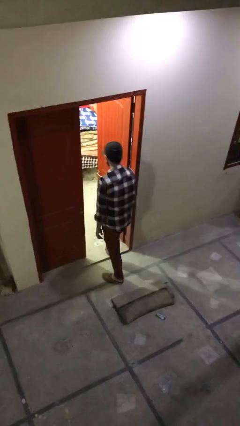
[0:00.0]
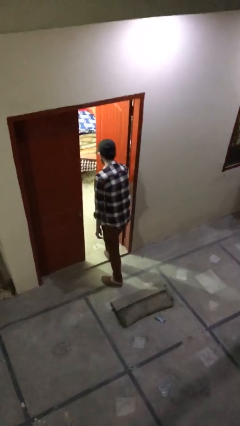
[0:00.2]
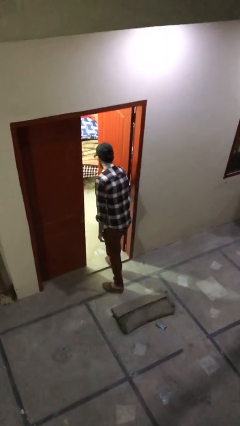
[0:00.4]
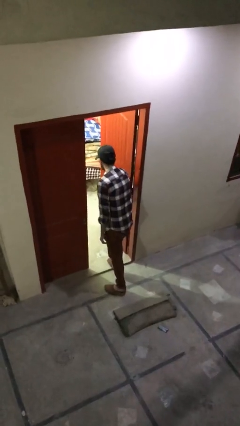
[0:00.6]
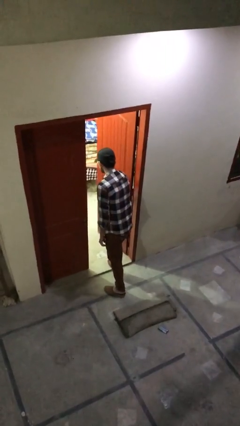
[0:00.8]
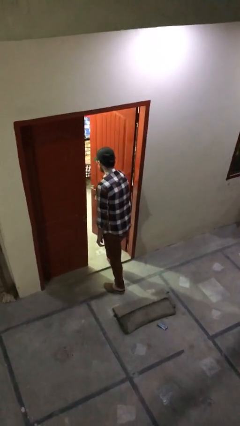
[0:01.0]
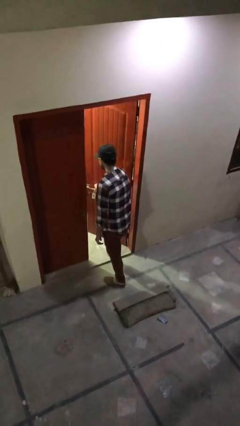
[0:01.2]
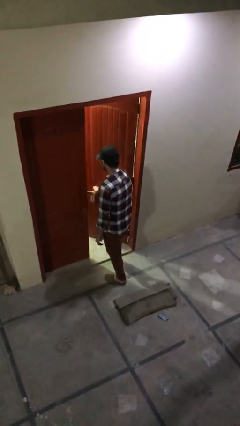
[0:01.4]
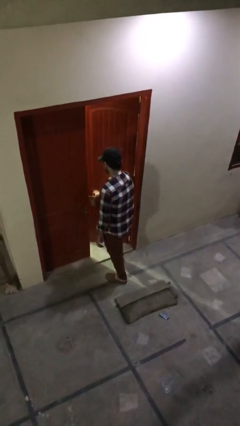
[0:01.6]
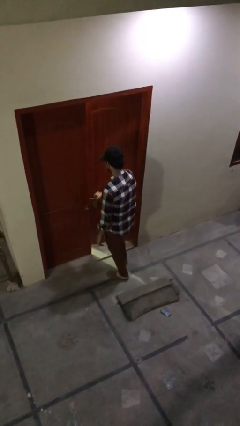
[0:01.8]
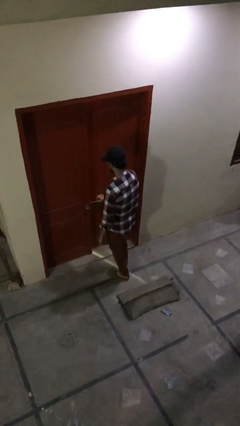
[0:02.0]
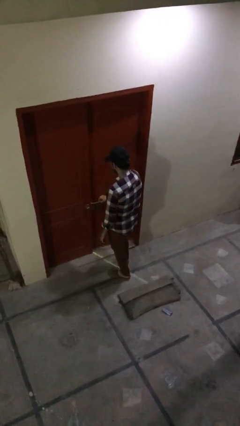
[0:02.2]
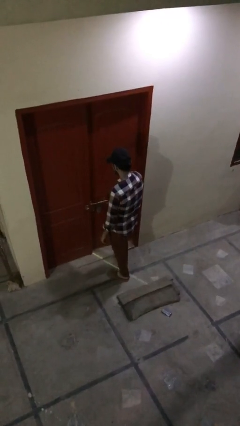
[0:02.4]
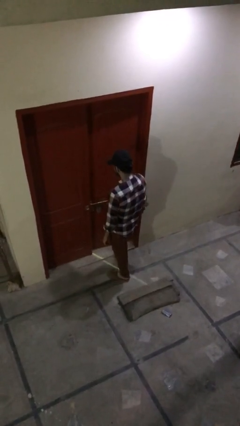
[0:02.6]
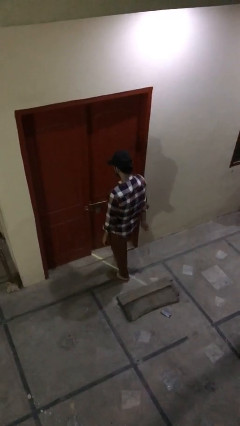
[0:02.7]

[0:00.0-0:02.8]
person closes facility door

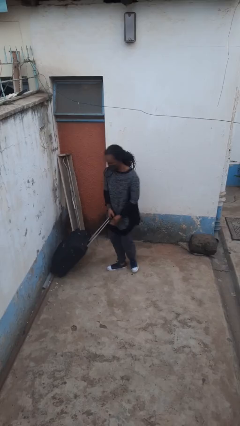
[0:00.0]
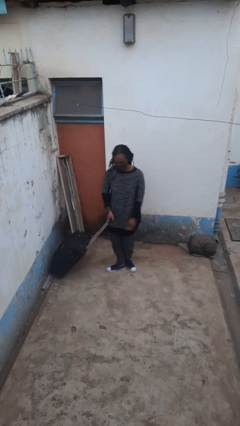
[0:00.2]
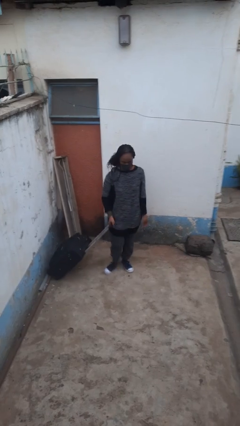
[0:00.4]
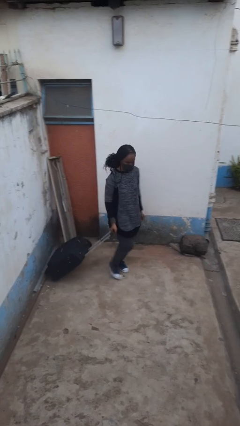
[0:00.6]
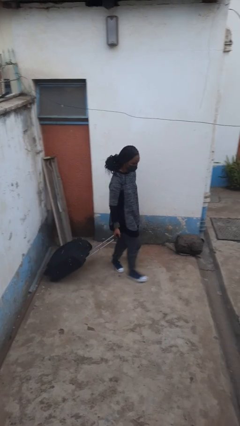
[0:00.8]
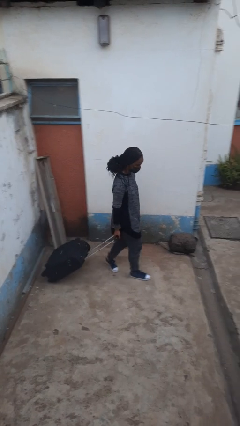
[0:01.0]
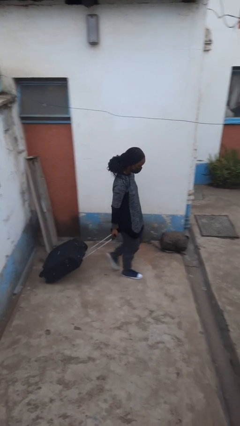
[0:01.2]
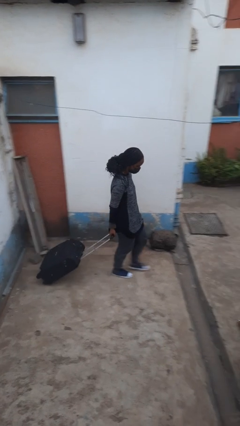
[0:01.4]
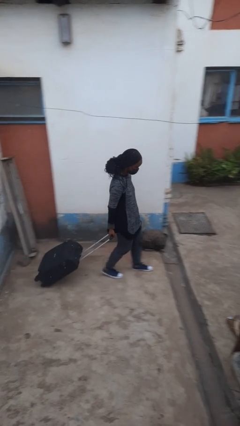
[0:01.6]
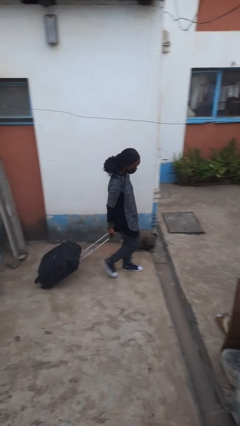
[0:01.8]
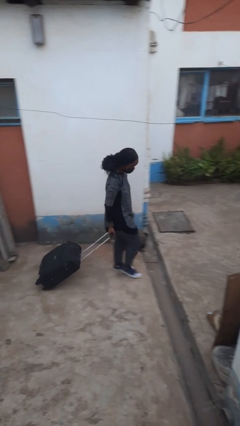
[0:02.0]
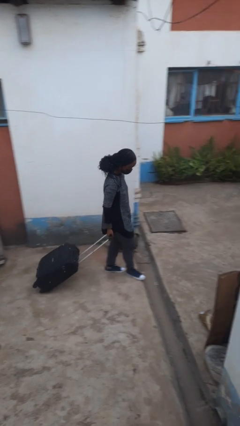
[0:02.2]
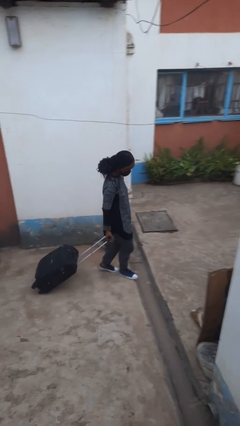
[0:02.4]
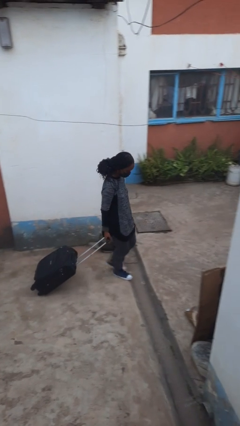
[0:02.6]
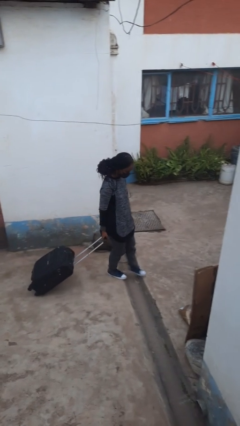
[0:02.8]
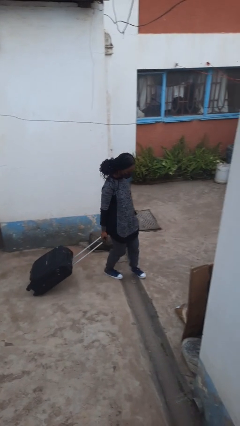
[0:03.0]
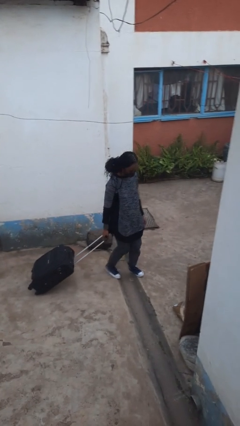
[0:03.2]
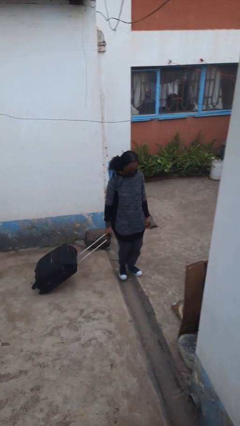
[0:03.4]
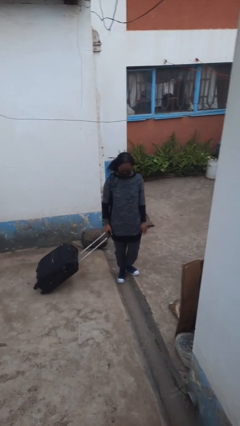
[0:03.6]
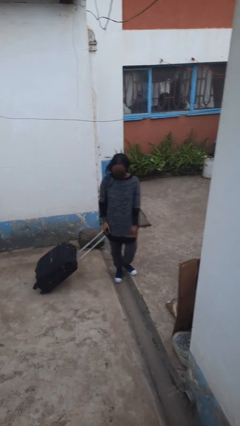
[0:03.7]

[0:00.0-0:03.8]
person pulls wheeled cart

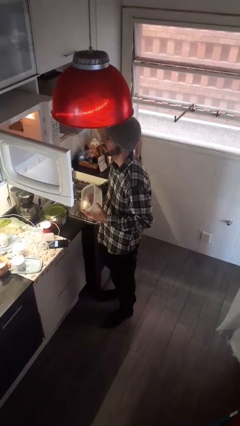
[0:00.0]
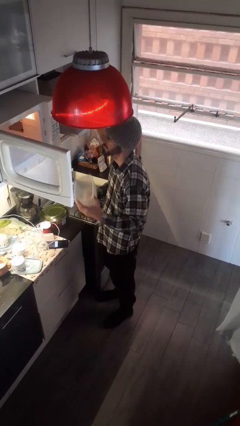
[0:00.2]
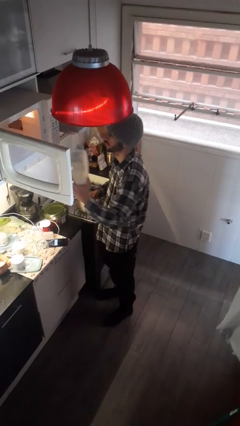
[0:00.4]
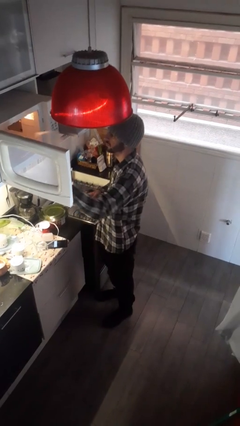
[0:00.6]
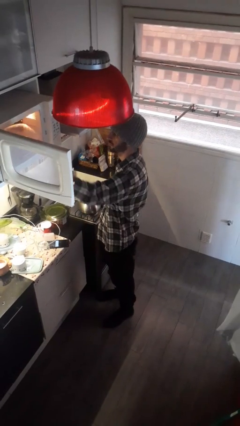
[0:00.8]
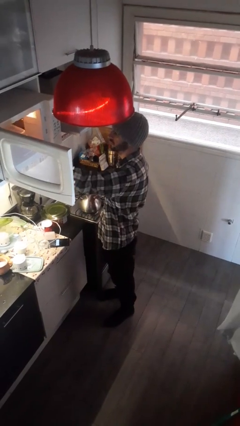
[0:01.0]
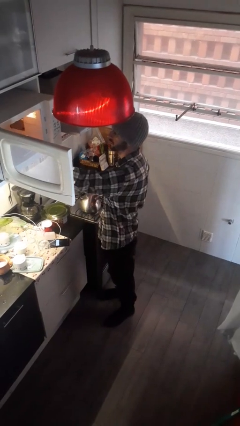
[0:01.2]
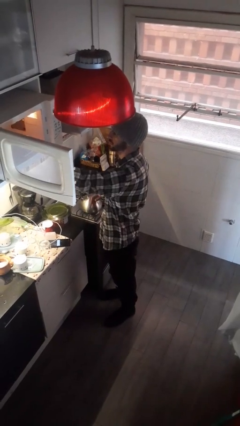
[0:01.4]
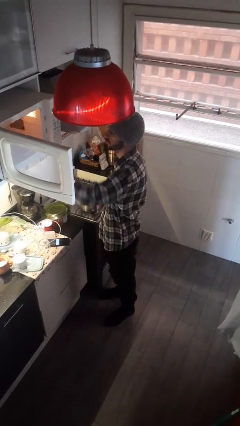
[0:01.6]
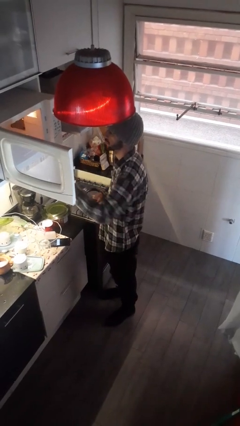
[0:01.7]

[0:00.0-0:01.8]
person puts object into microwave

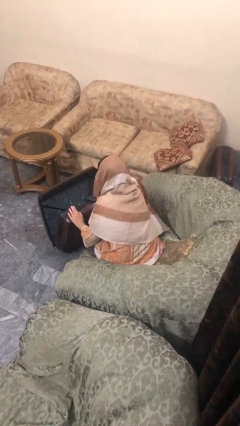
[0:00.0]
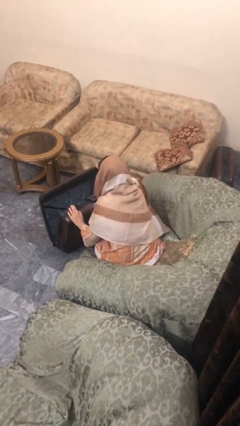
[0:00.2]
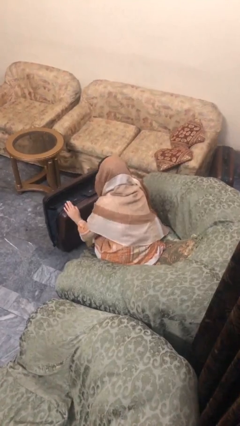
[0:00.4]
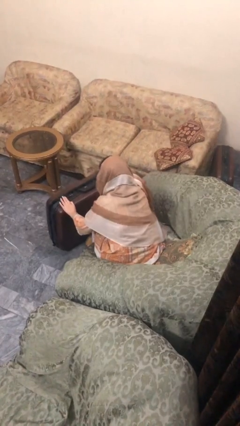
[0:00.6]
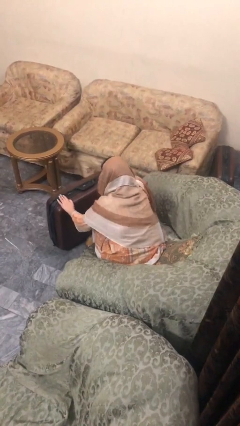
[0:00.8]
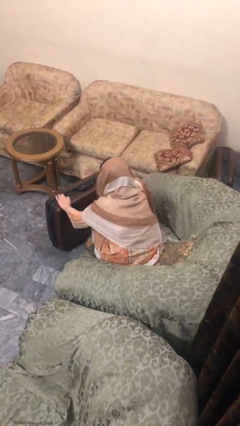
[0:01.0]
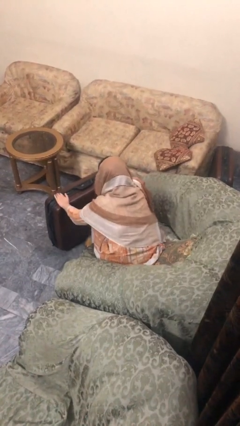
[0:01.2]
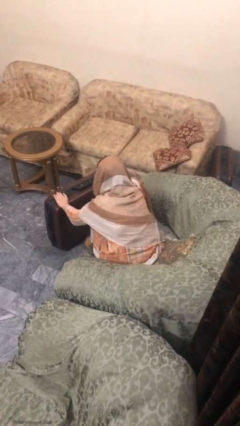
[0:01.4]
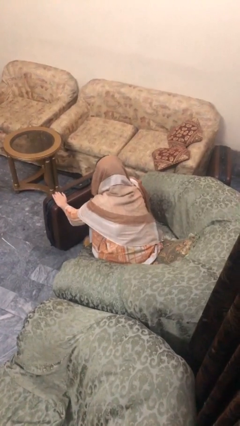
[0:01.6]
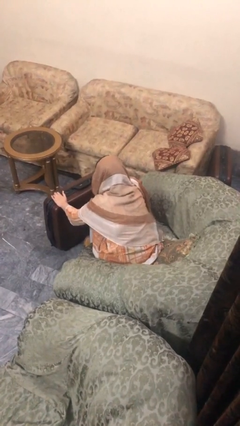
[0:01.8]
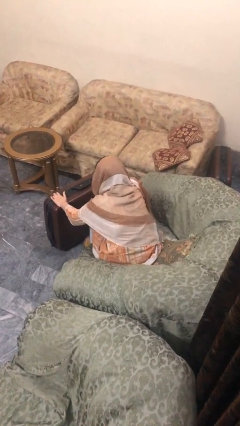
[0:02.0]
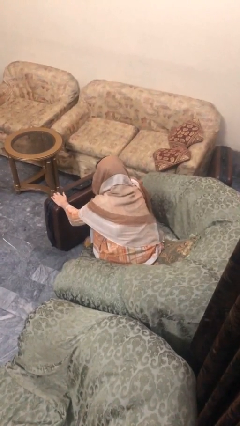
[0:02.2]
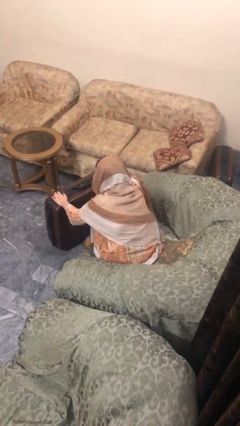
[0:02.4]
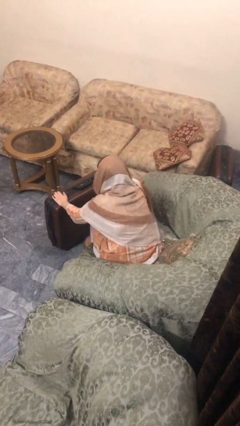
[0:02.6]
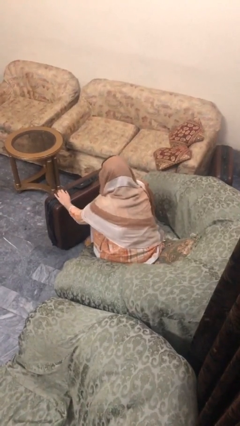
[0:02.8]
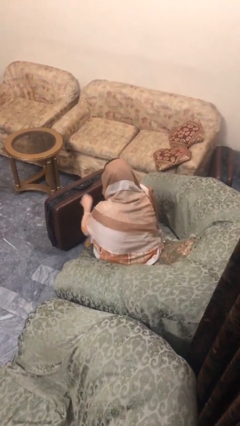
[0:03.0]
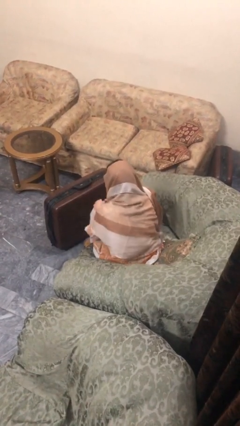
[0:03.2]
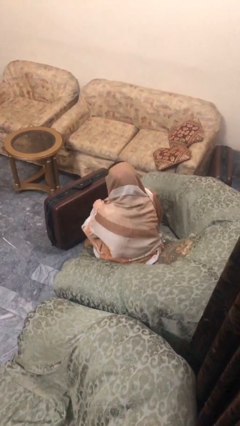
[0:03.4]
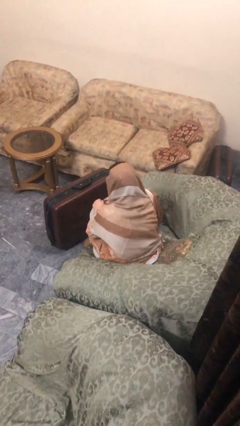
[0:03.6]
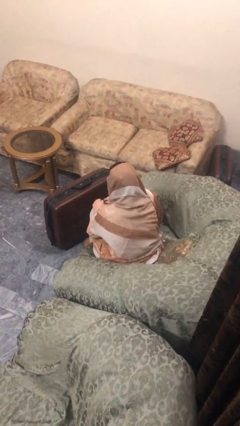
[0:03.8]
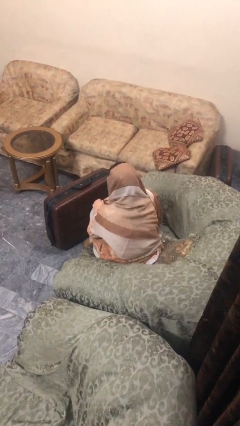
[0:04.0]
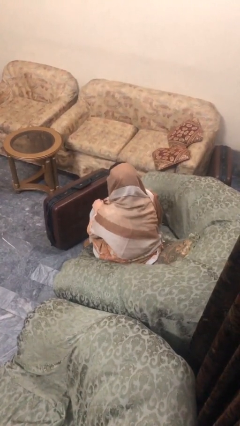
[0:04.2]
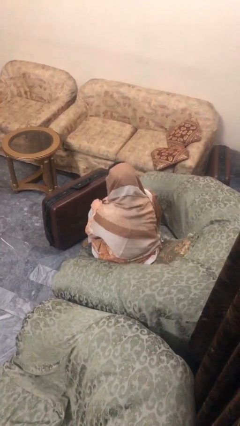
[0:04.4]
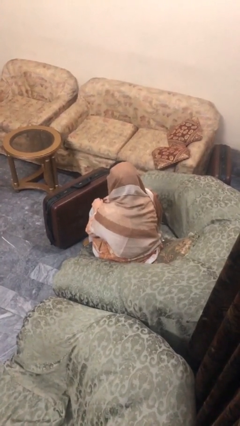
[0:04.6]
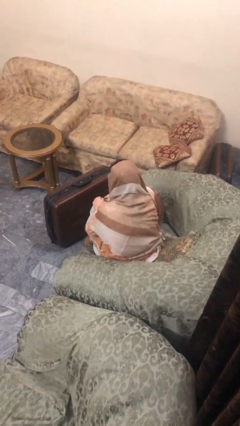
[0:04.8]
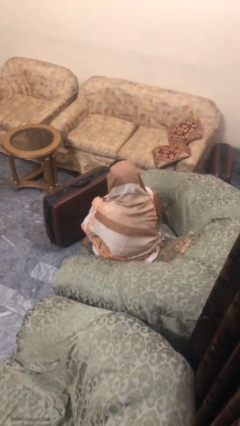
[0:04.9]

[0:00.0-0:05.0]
person closes suitcase

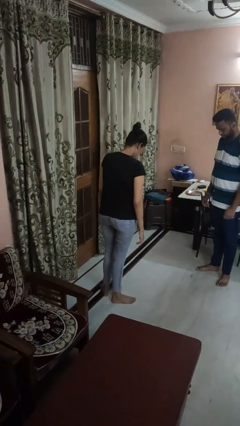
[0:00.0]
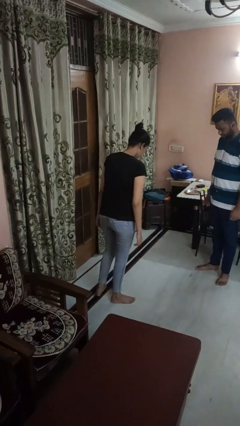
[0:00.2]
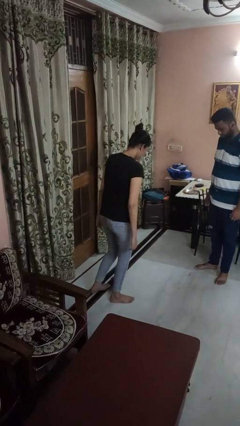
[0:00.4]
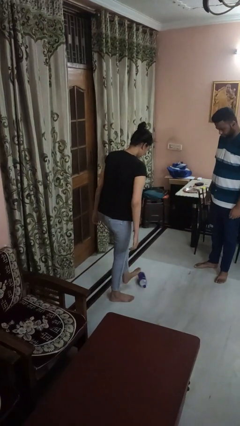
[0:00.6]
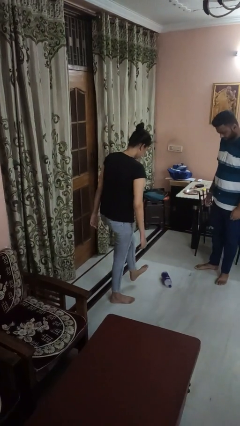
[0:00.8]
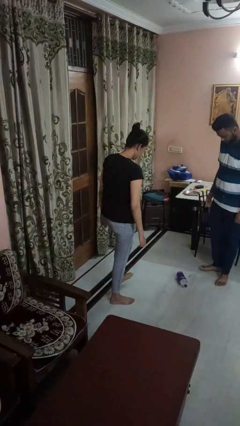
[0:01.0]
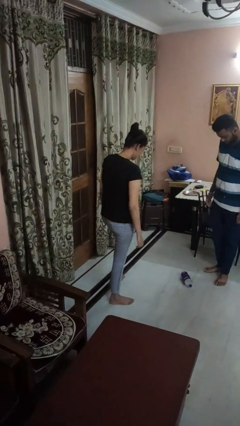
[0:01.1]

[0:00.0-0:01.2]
person kicks object to person

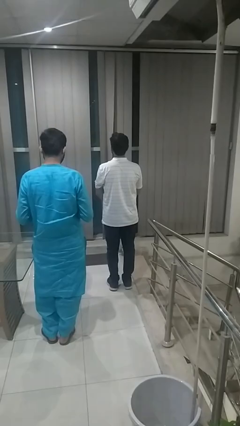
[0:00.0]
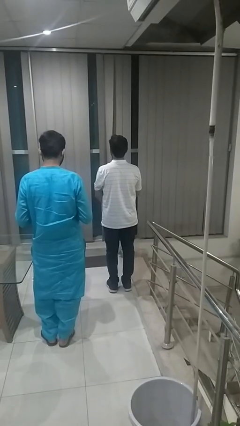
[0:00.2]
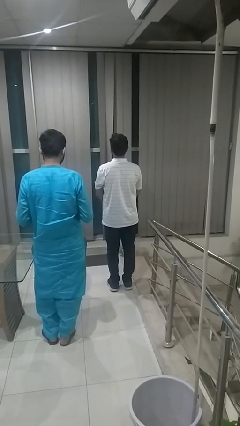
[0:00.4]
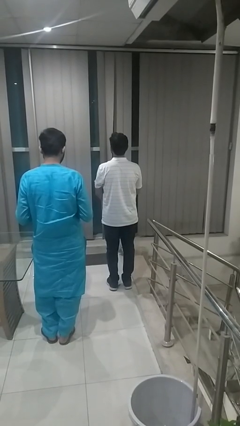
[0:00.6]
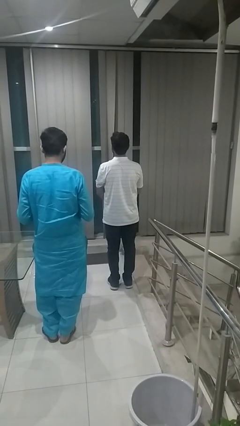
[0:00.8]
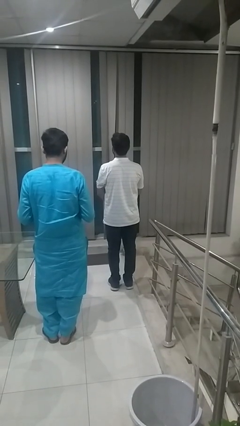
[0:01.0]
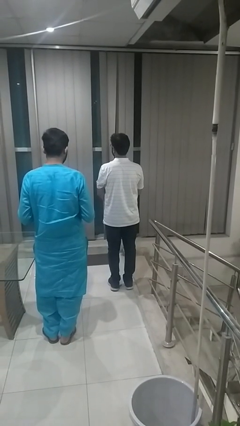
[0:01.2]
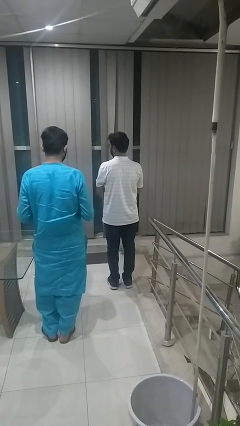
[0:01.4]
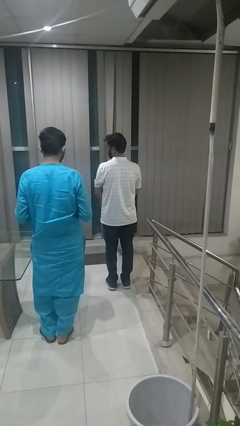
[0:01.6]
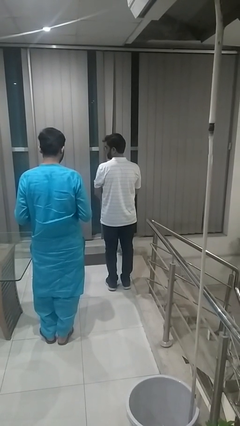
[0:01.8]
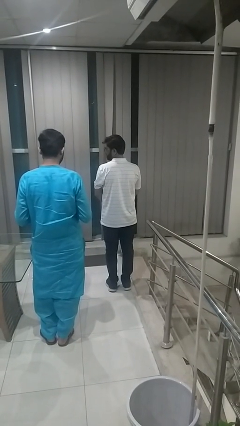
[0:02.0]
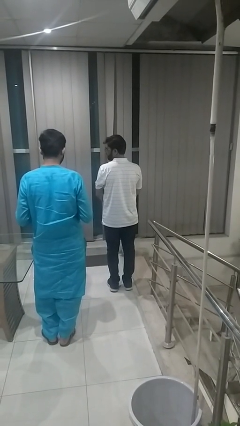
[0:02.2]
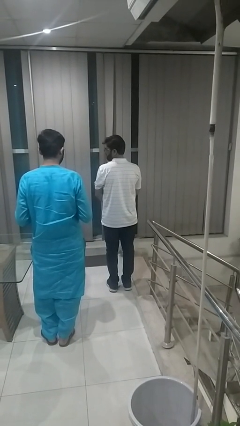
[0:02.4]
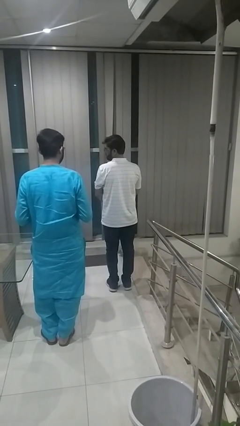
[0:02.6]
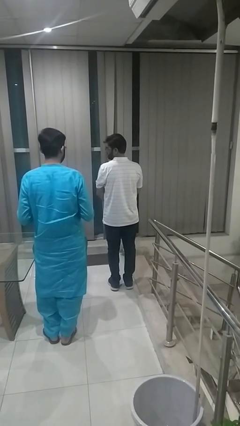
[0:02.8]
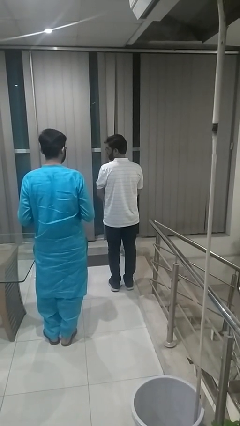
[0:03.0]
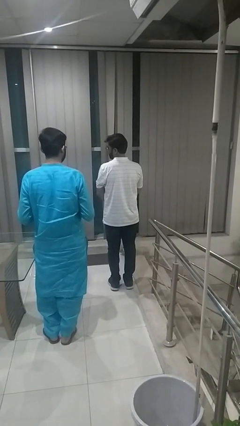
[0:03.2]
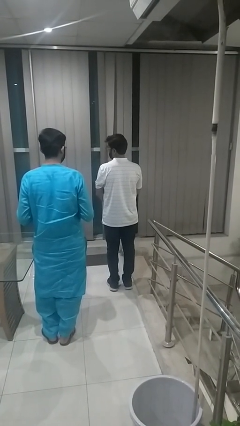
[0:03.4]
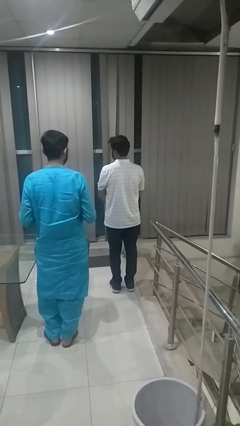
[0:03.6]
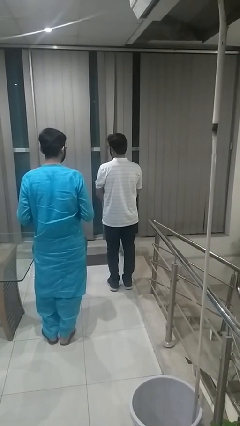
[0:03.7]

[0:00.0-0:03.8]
person looks over shoulder
